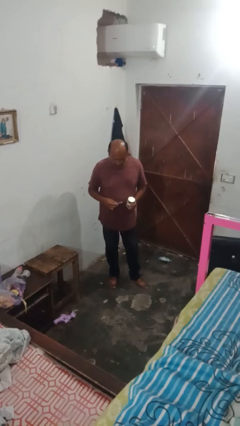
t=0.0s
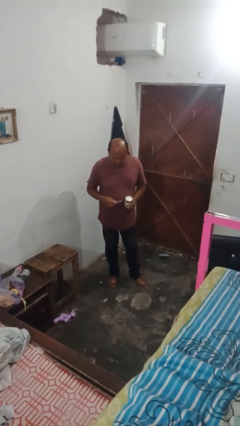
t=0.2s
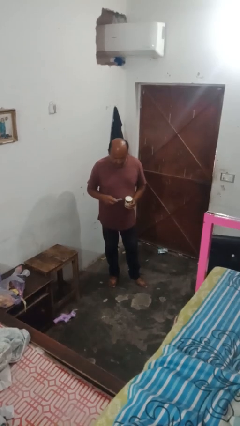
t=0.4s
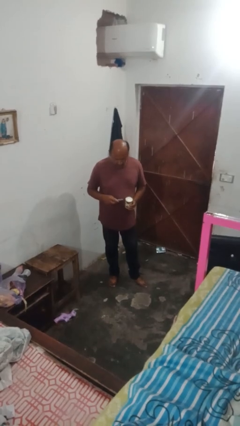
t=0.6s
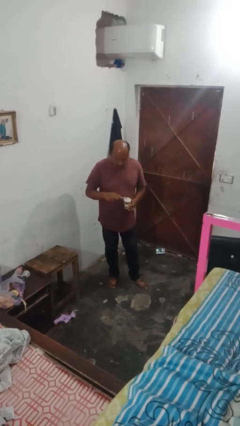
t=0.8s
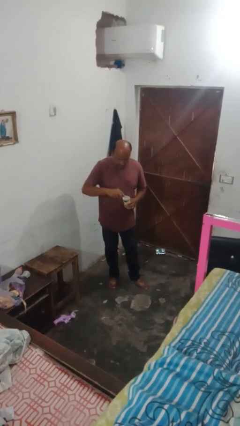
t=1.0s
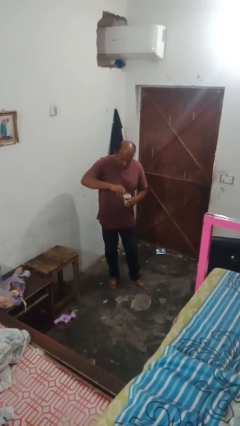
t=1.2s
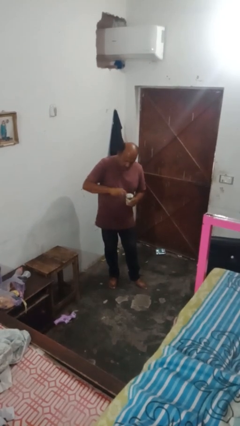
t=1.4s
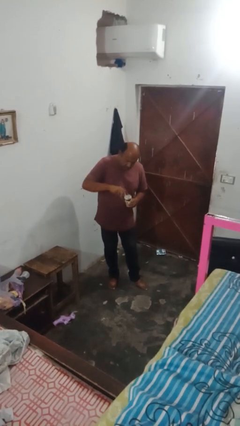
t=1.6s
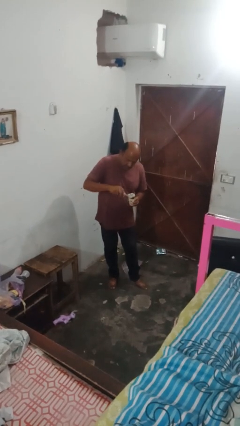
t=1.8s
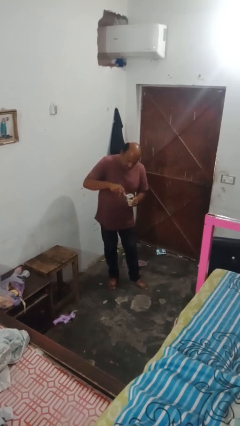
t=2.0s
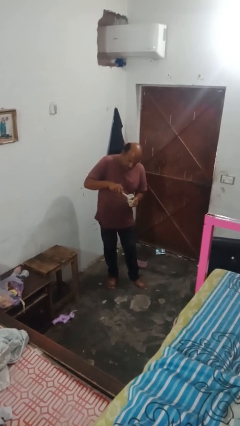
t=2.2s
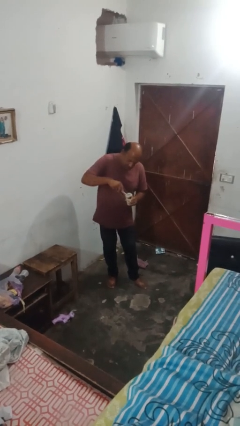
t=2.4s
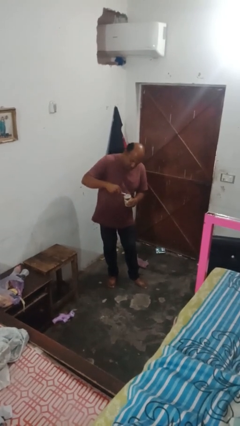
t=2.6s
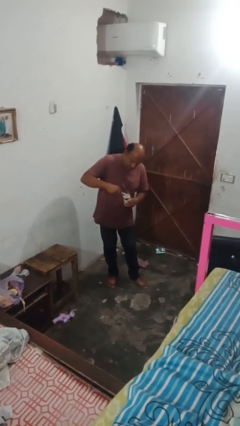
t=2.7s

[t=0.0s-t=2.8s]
person opens can with can opener

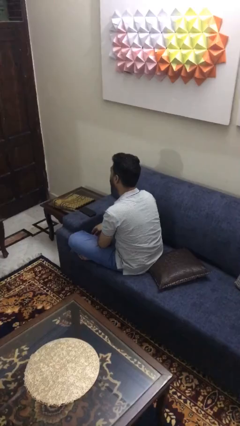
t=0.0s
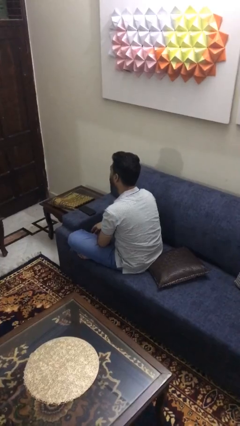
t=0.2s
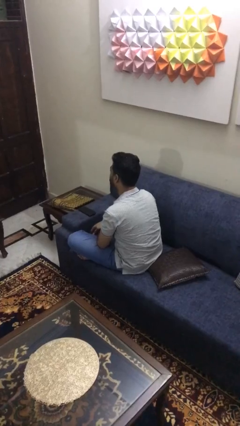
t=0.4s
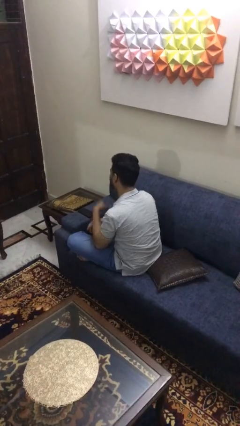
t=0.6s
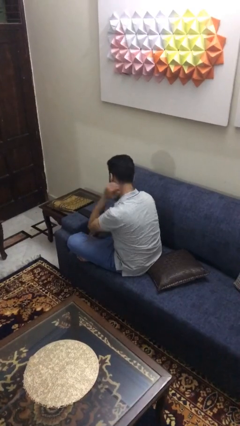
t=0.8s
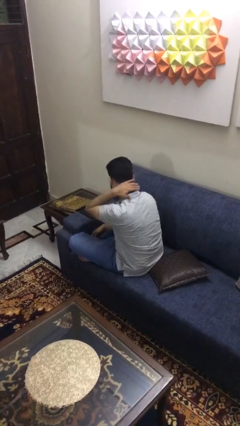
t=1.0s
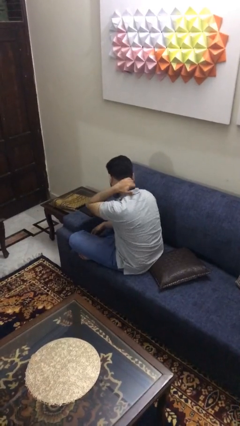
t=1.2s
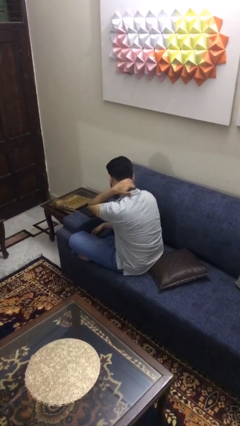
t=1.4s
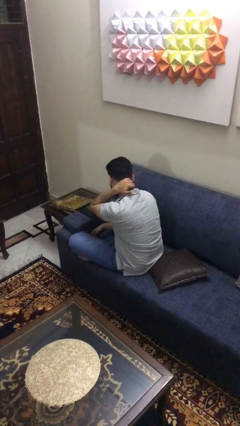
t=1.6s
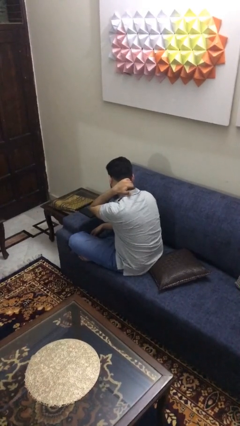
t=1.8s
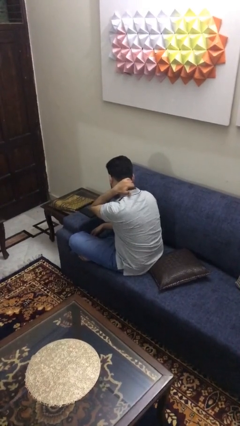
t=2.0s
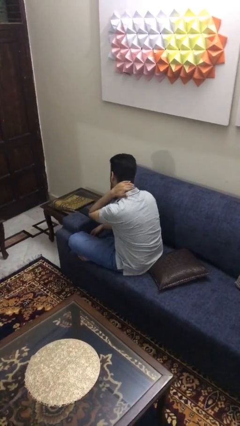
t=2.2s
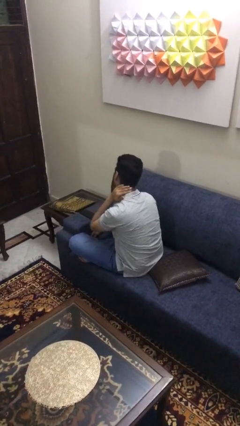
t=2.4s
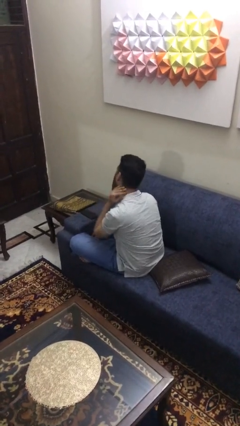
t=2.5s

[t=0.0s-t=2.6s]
person rubs neck

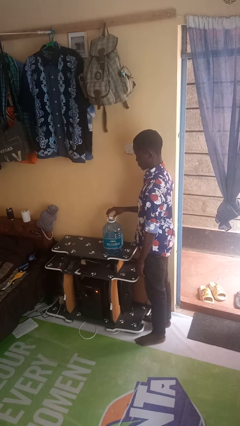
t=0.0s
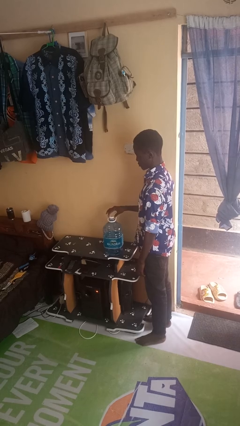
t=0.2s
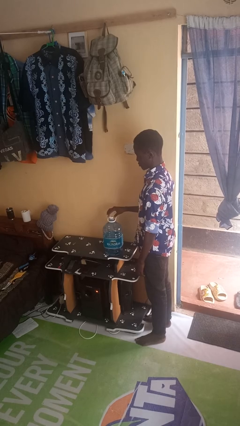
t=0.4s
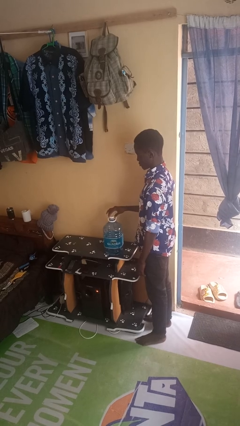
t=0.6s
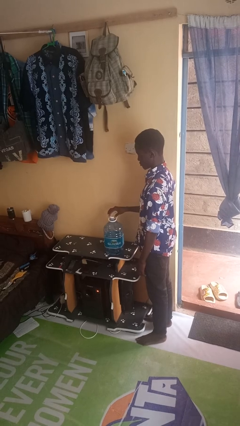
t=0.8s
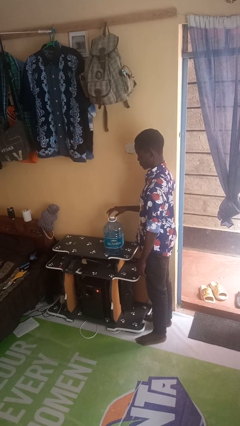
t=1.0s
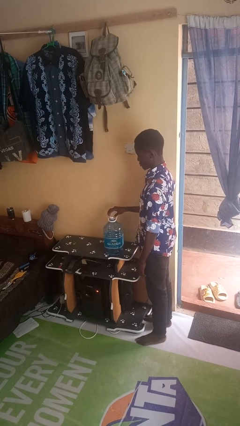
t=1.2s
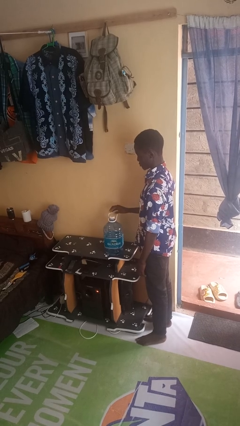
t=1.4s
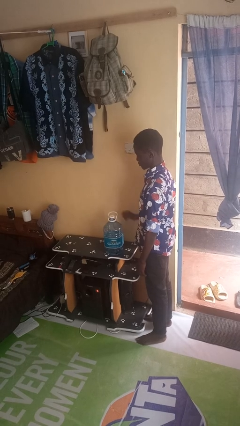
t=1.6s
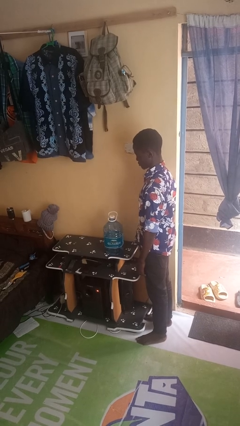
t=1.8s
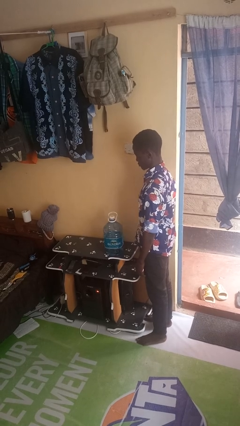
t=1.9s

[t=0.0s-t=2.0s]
person screws lid to bottle

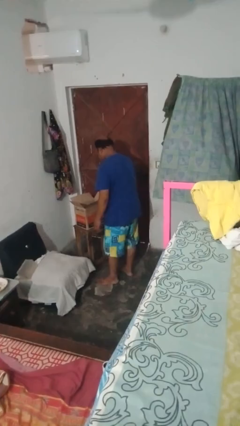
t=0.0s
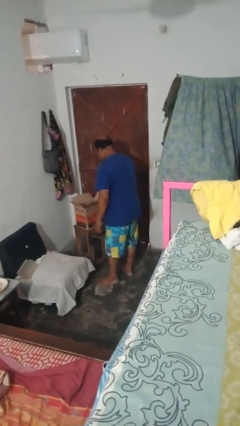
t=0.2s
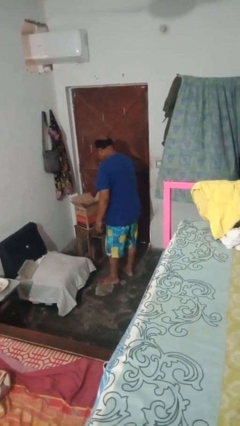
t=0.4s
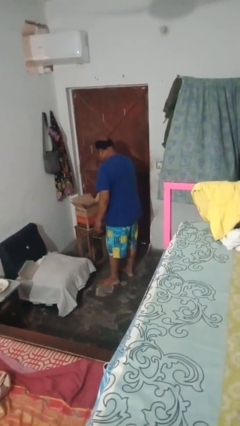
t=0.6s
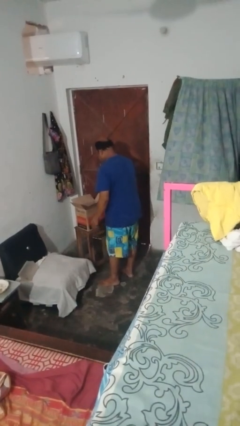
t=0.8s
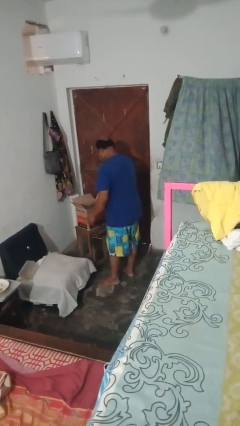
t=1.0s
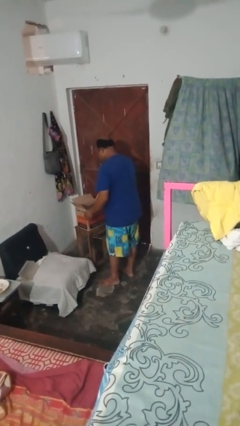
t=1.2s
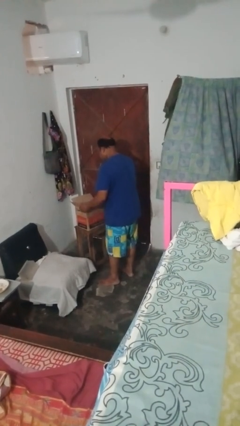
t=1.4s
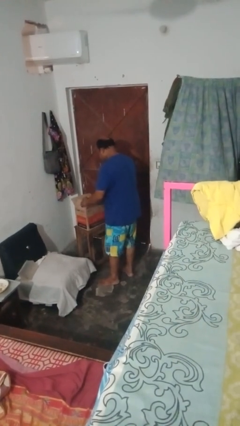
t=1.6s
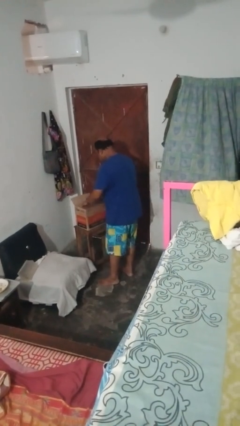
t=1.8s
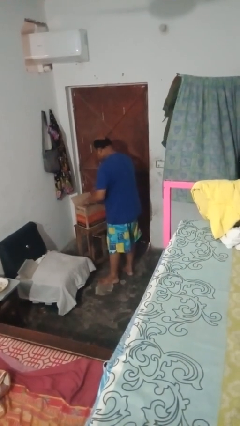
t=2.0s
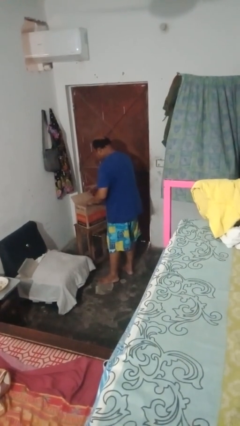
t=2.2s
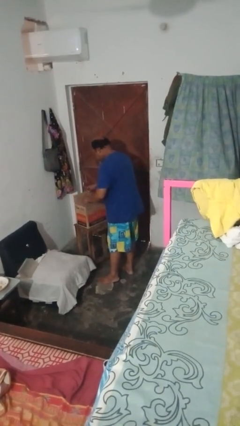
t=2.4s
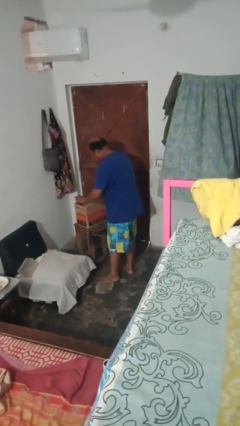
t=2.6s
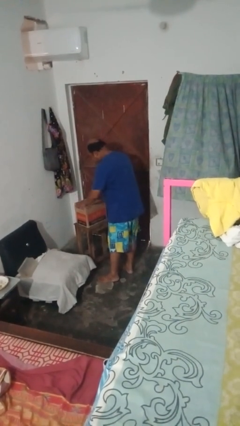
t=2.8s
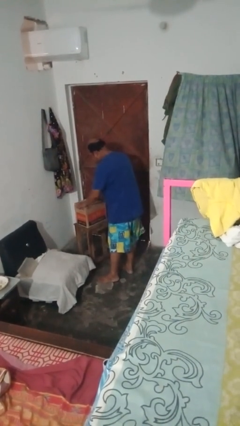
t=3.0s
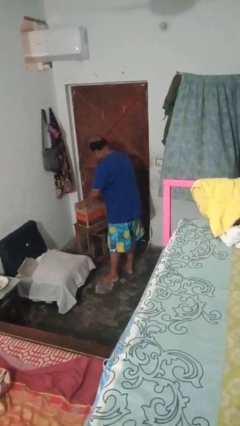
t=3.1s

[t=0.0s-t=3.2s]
person closes box

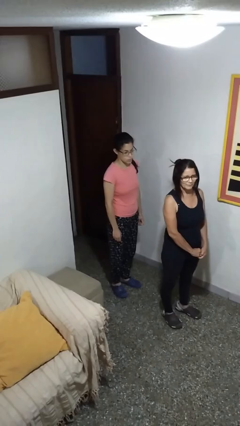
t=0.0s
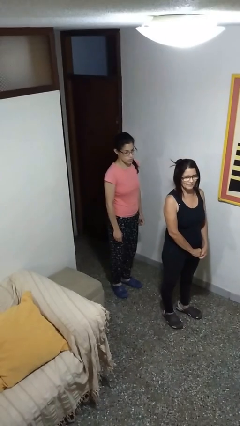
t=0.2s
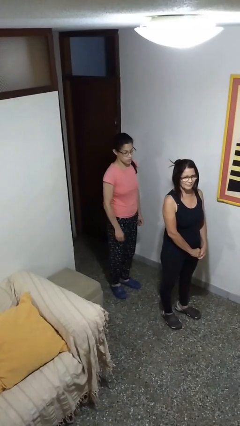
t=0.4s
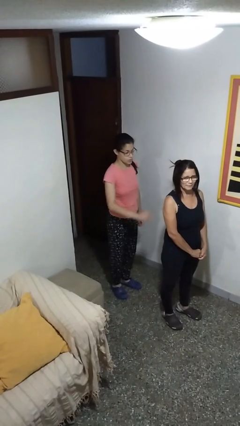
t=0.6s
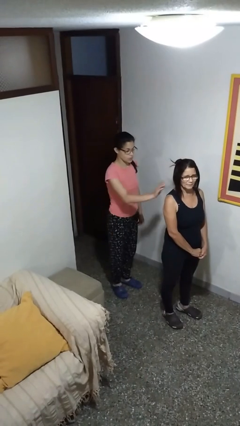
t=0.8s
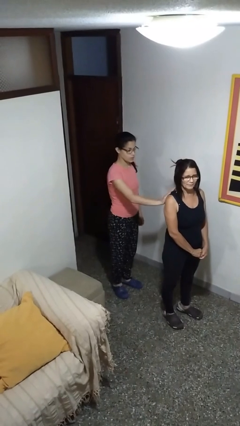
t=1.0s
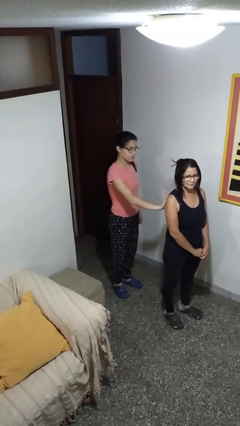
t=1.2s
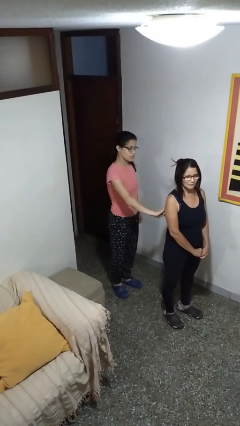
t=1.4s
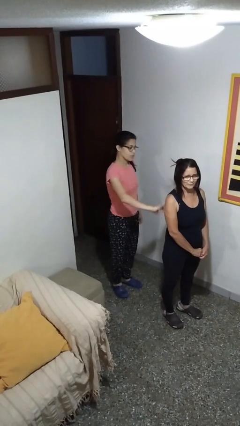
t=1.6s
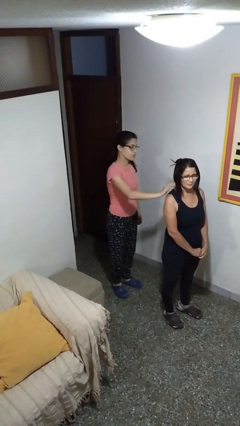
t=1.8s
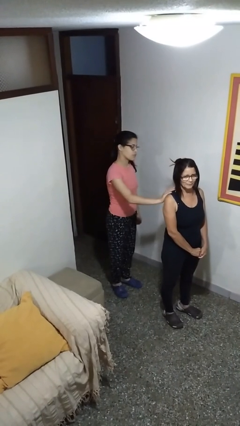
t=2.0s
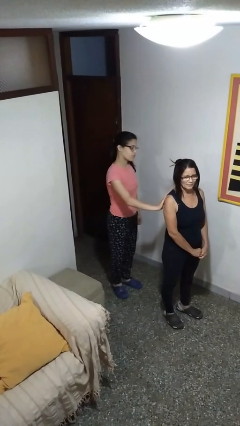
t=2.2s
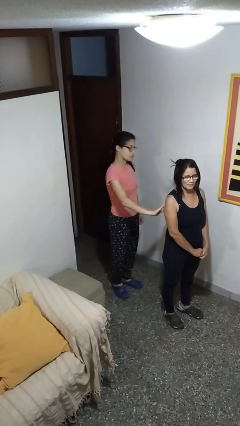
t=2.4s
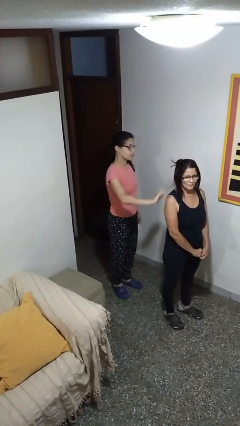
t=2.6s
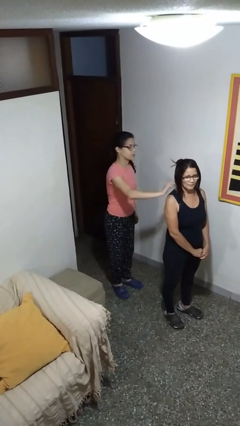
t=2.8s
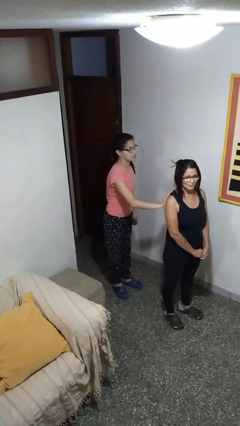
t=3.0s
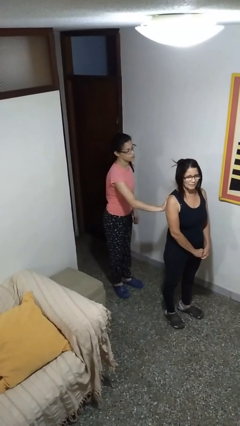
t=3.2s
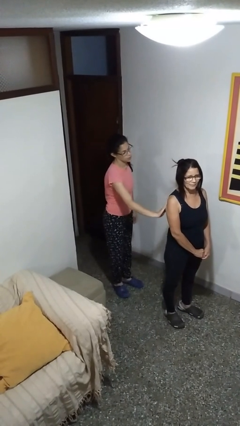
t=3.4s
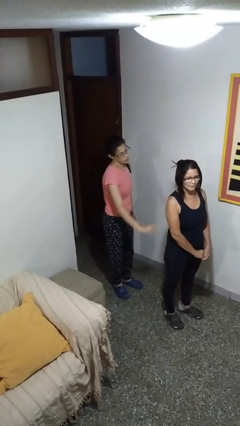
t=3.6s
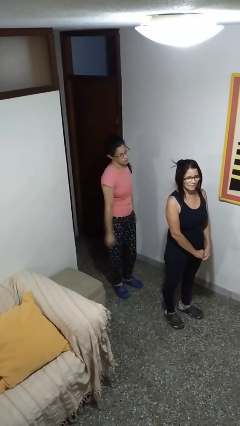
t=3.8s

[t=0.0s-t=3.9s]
person touches back of person

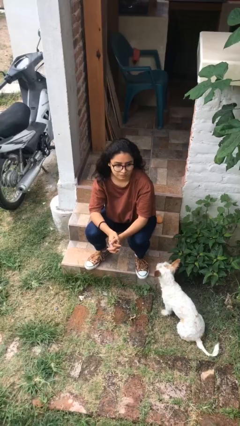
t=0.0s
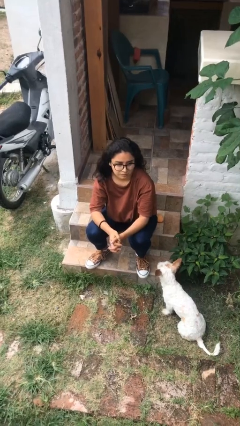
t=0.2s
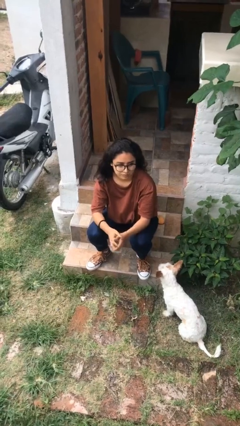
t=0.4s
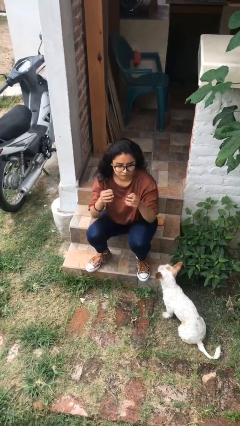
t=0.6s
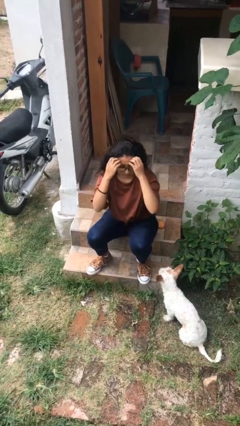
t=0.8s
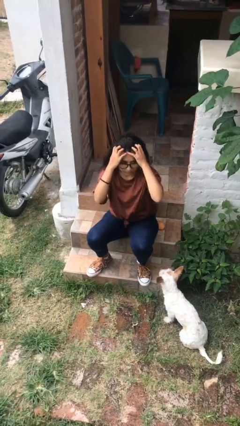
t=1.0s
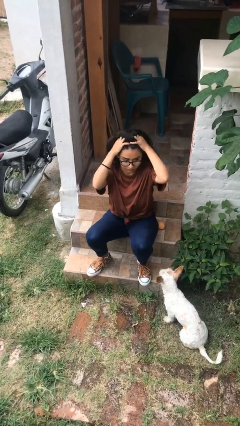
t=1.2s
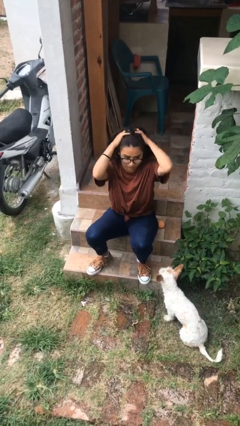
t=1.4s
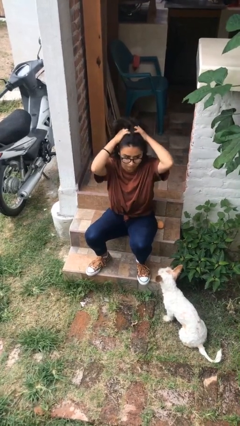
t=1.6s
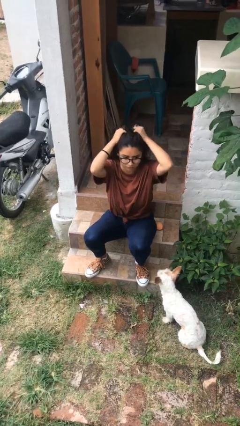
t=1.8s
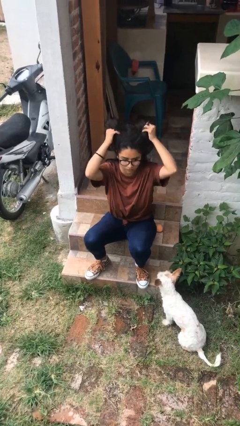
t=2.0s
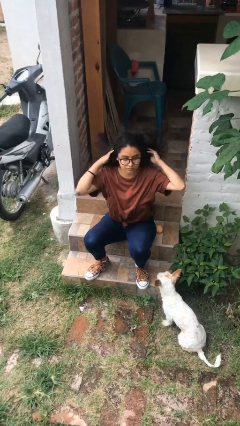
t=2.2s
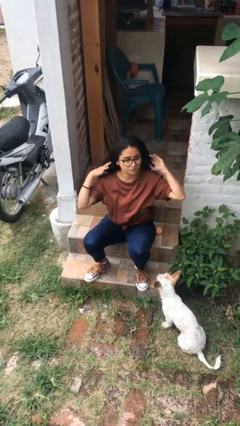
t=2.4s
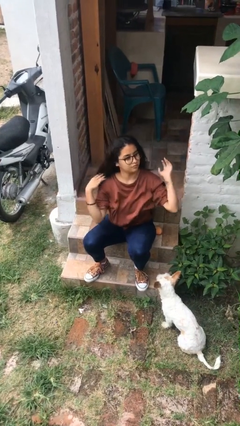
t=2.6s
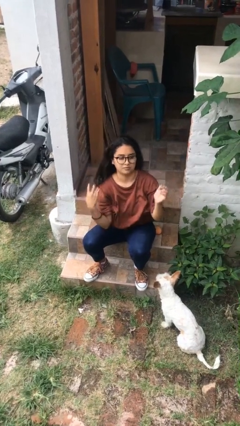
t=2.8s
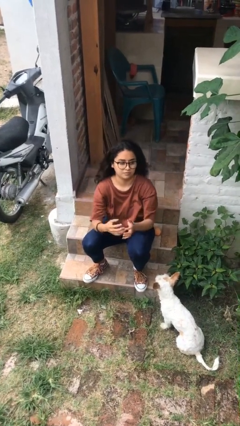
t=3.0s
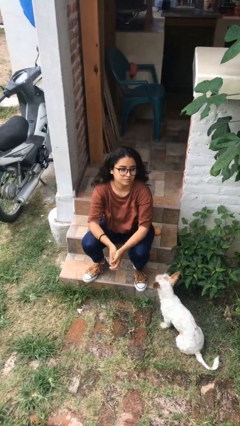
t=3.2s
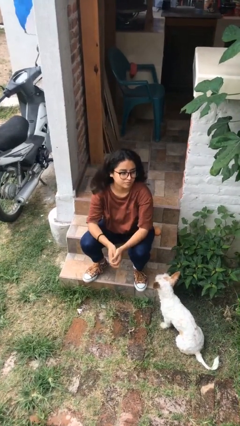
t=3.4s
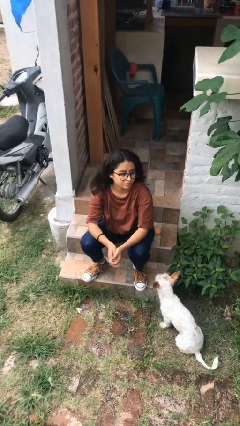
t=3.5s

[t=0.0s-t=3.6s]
person strokes hair
